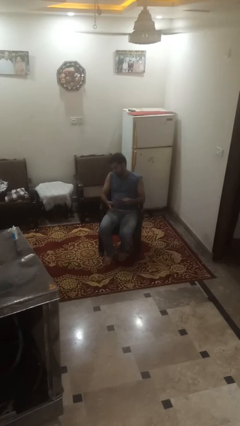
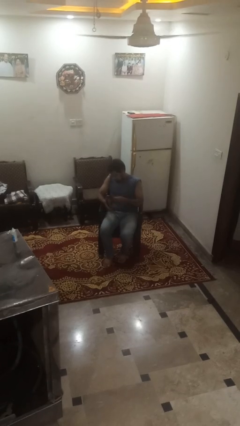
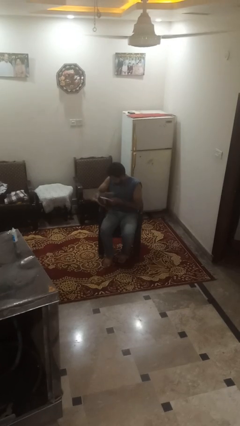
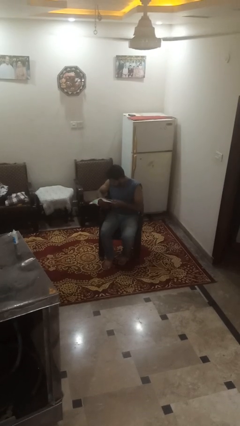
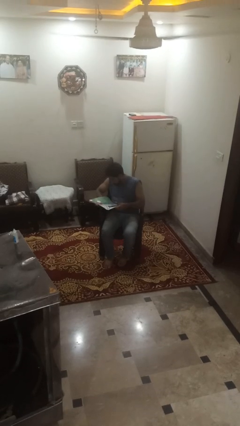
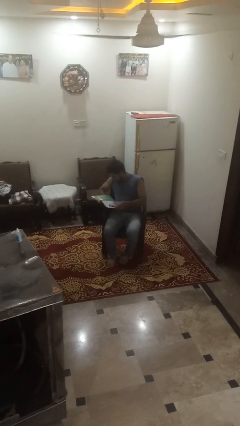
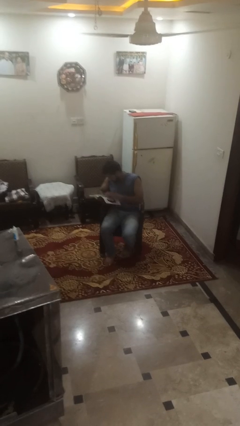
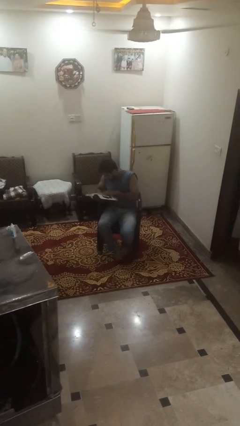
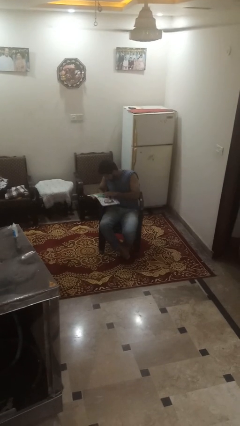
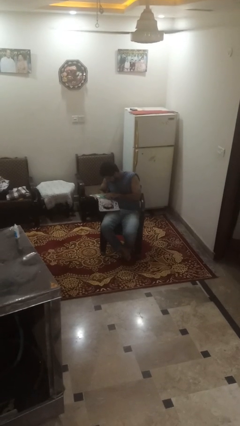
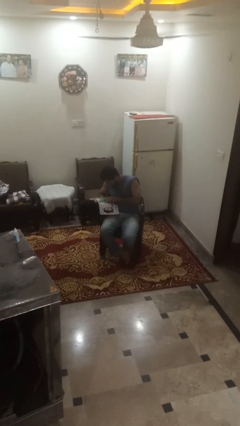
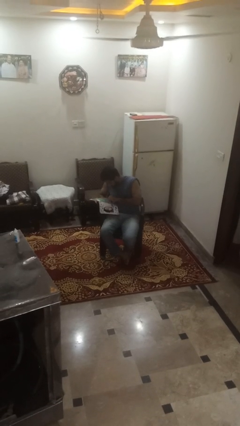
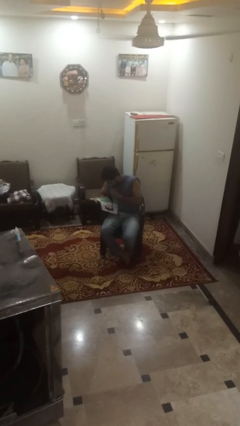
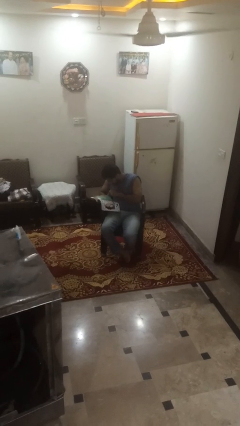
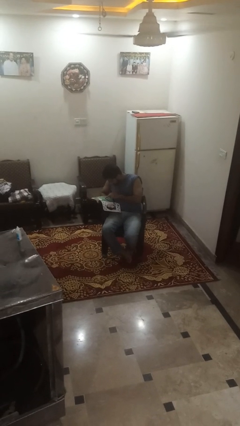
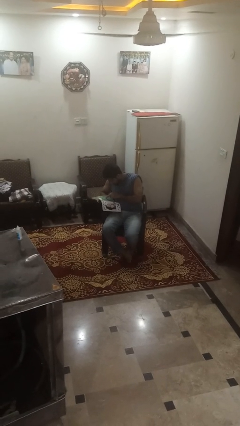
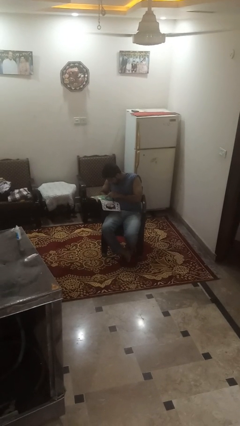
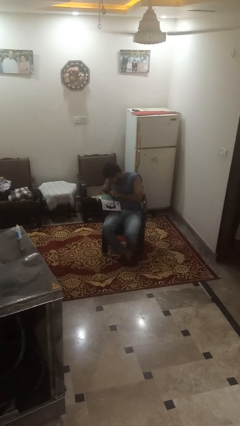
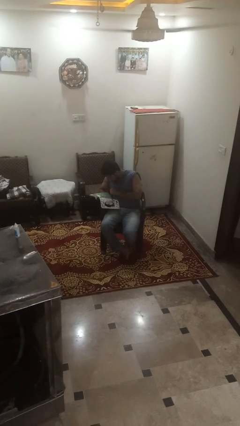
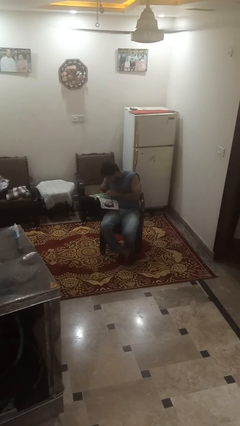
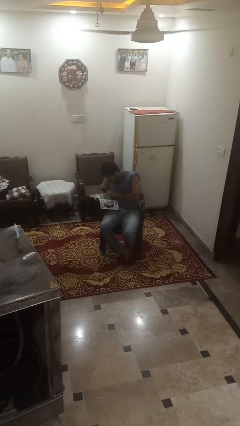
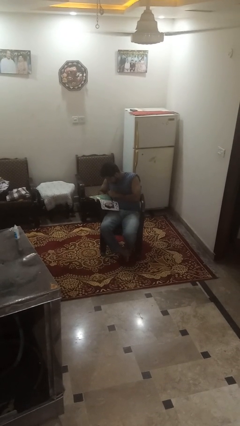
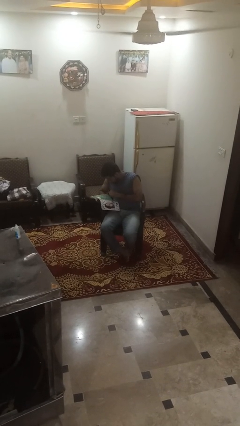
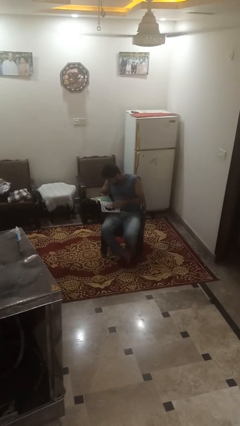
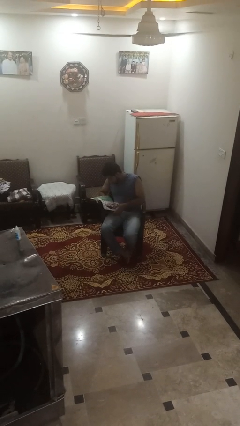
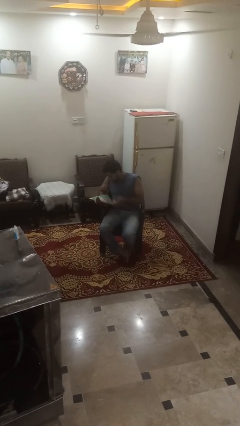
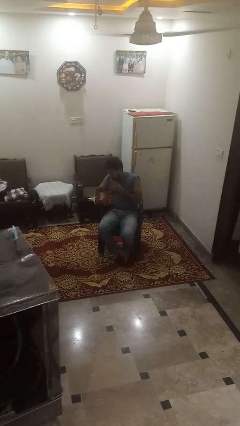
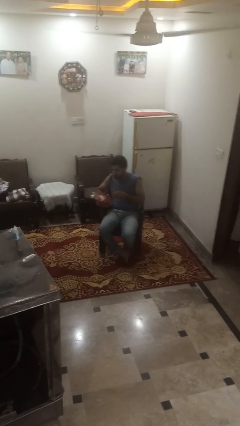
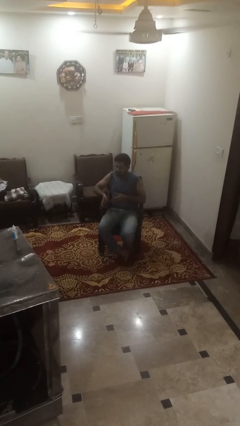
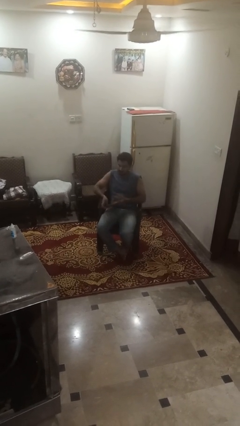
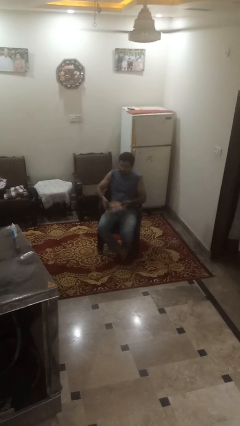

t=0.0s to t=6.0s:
person reads magazine

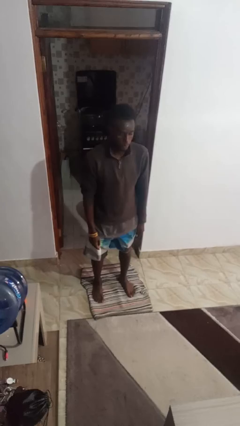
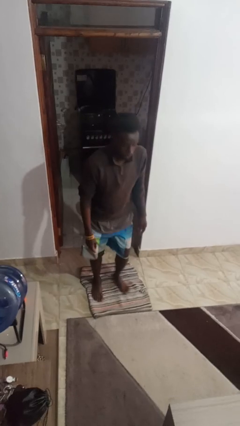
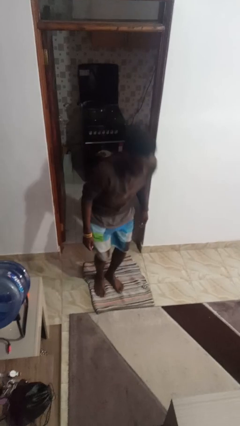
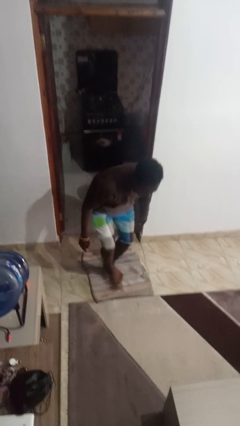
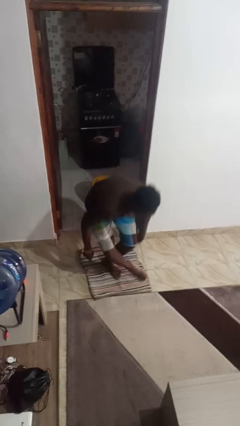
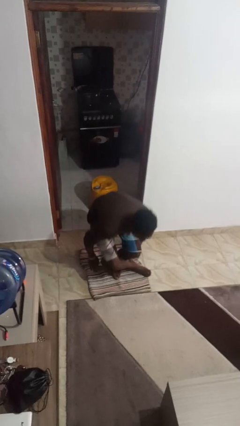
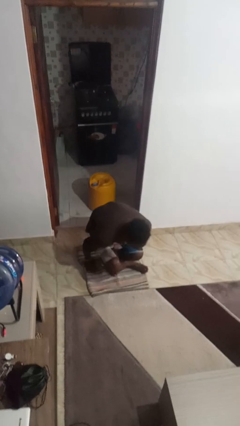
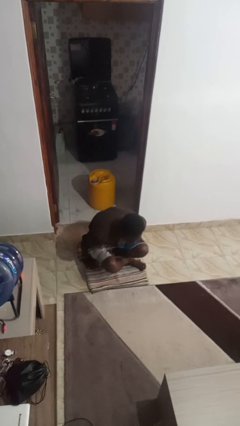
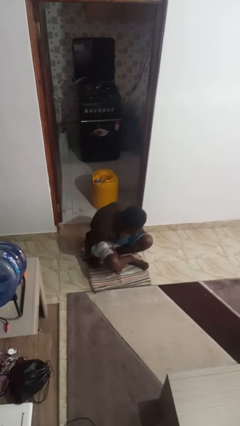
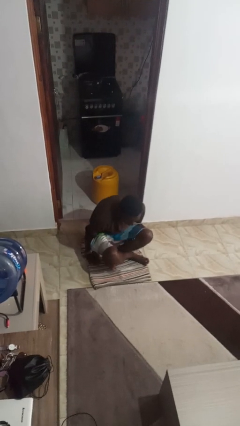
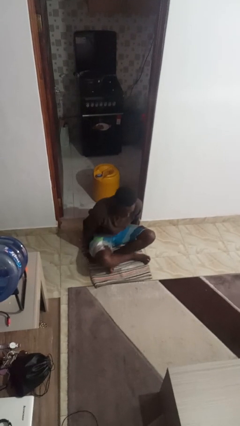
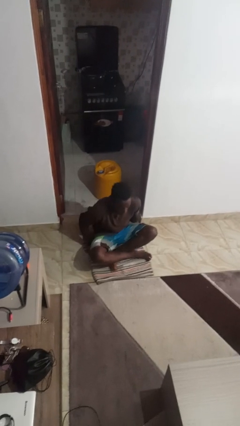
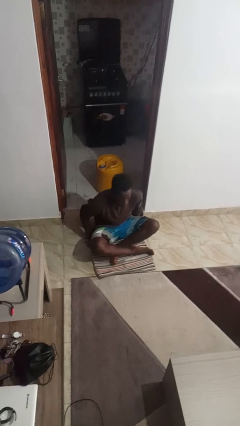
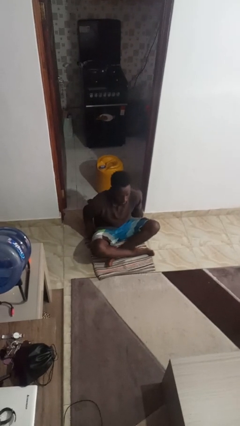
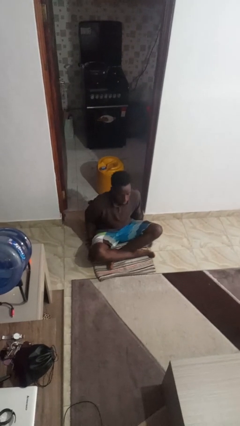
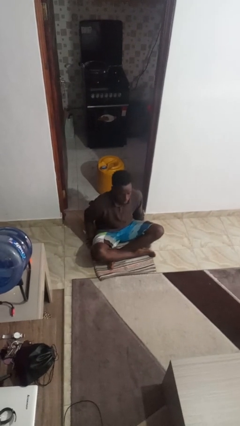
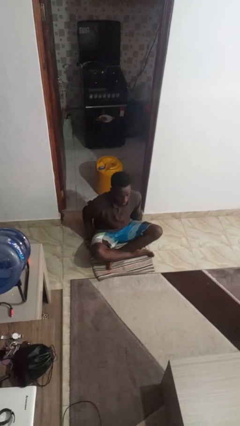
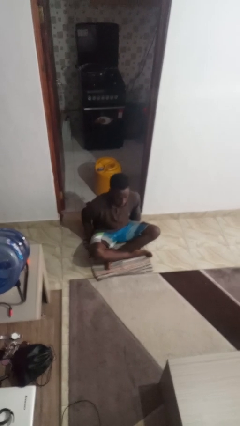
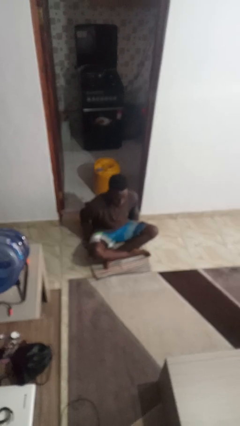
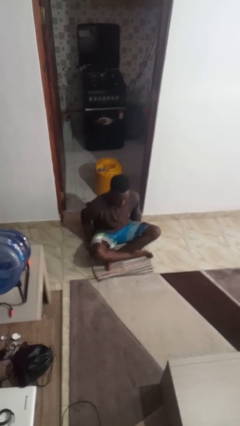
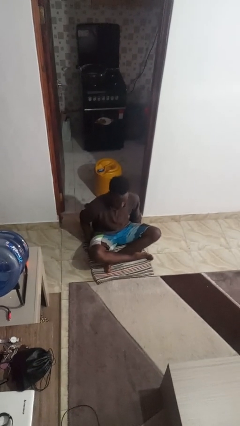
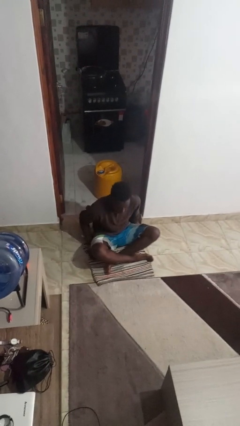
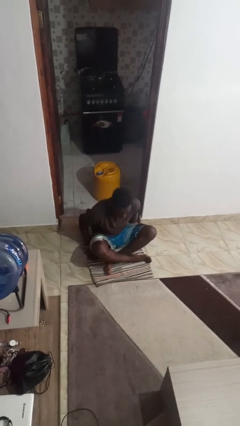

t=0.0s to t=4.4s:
person sits crisscross

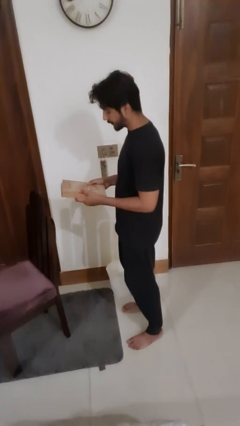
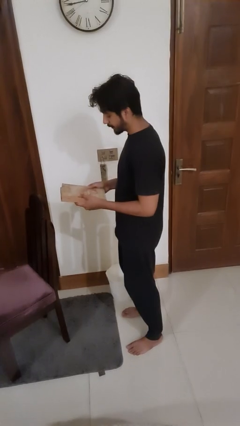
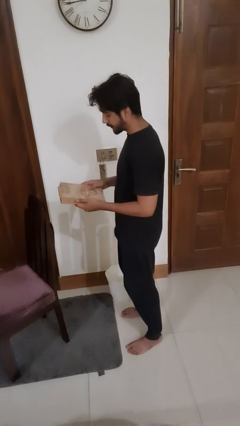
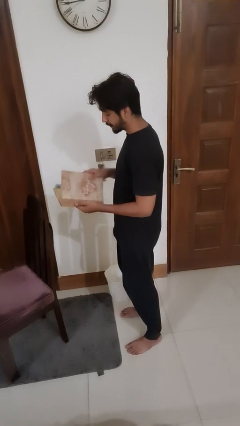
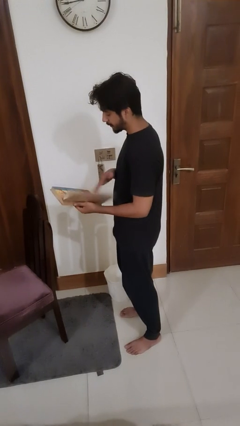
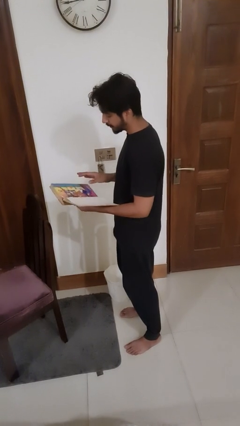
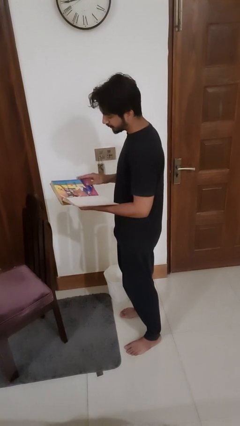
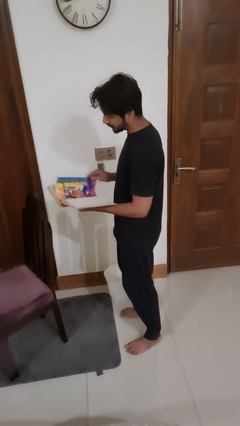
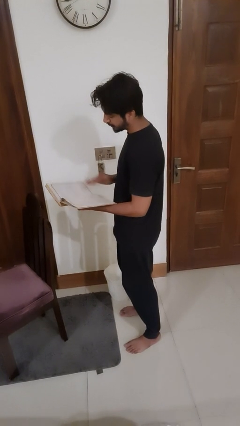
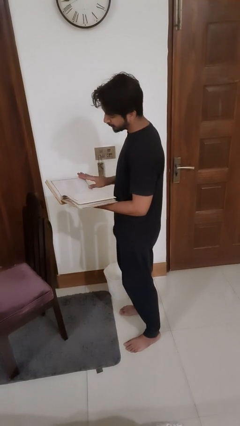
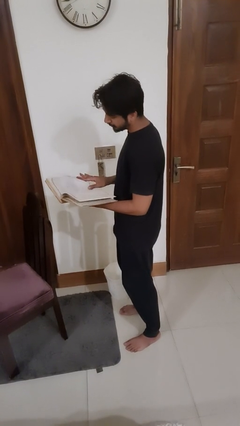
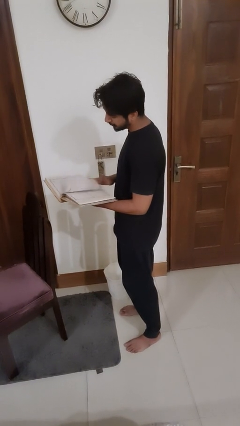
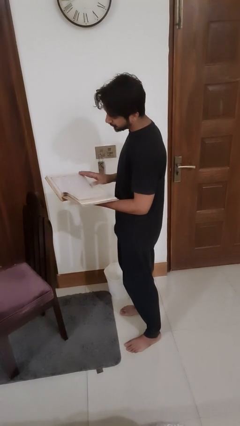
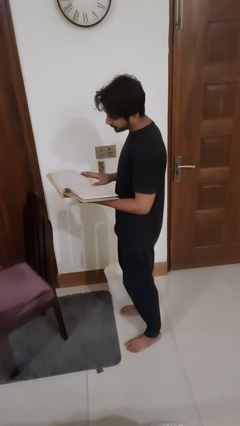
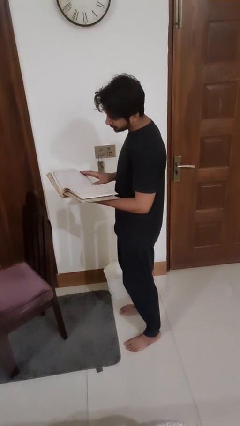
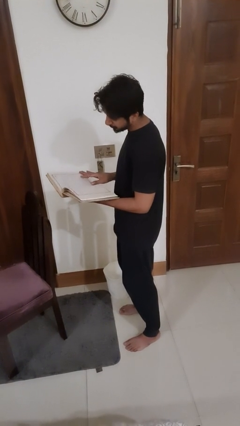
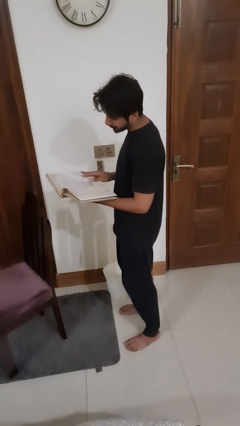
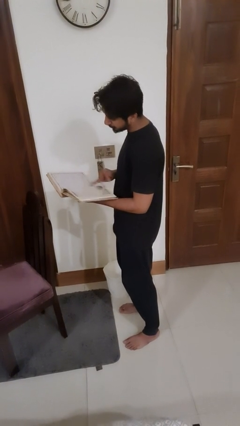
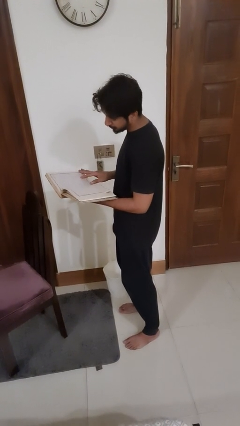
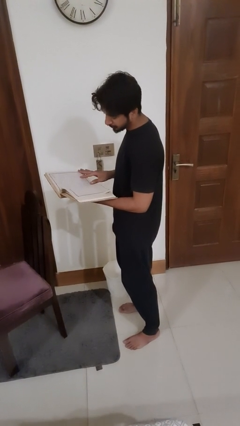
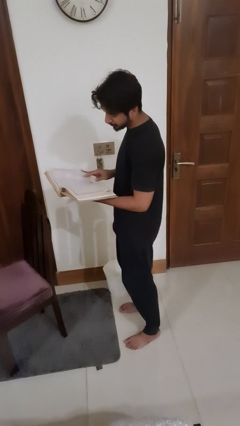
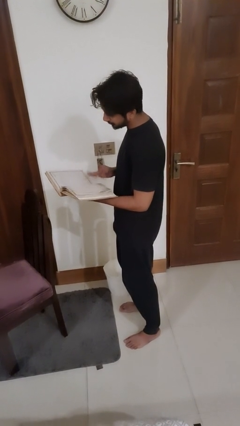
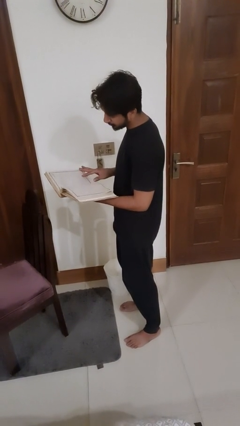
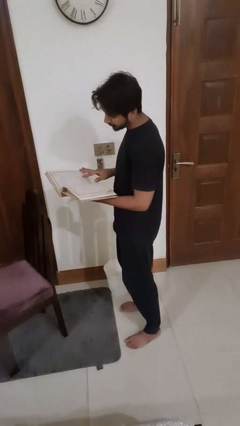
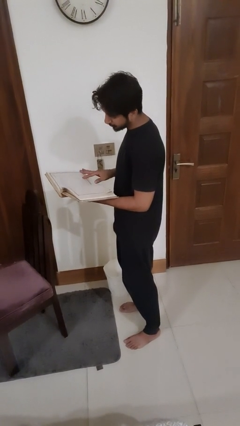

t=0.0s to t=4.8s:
person reads book

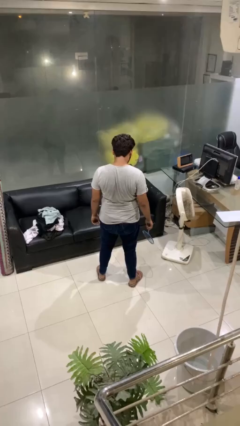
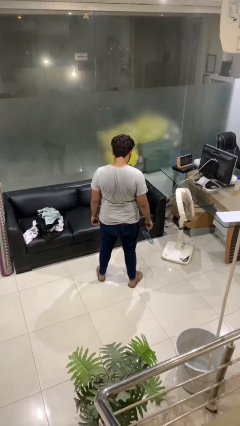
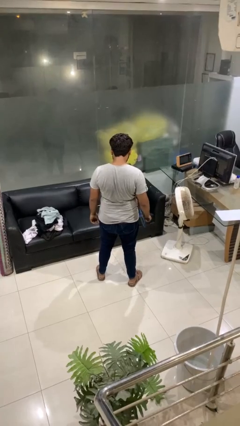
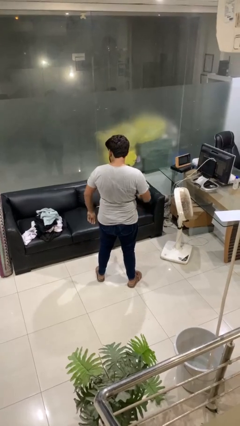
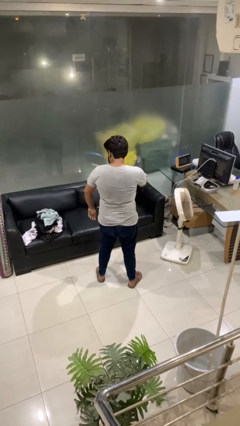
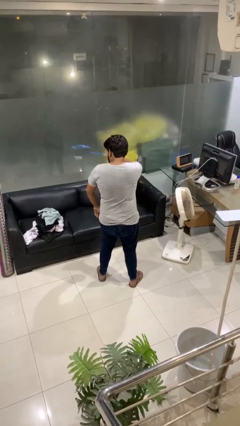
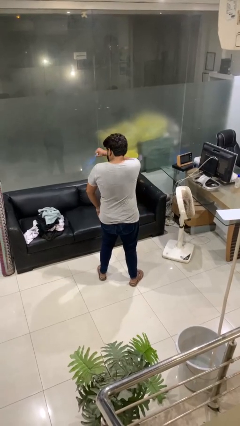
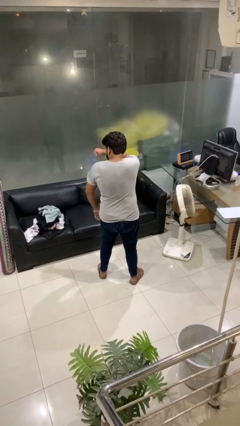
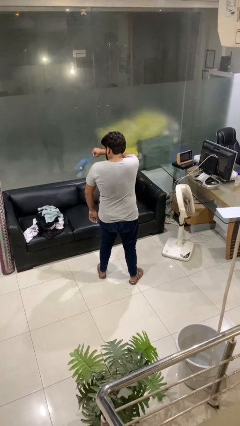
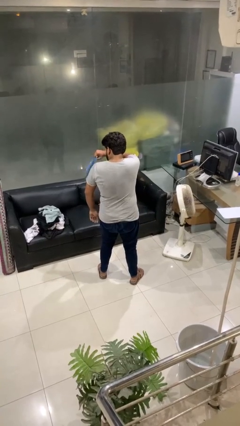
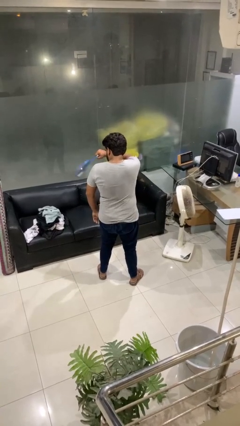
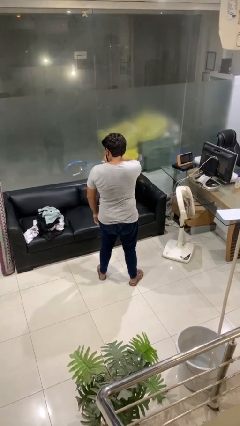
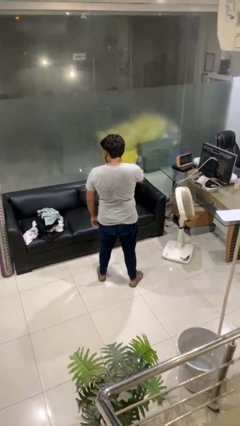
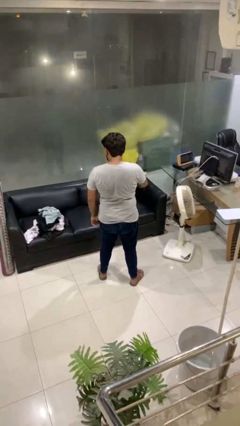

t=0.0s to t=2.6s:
person swats bug
